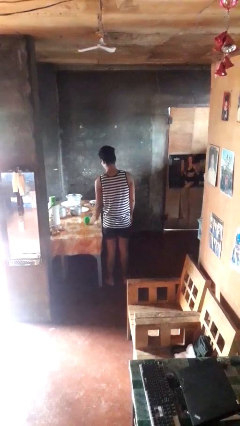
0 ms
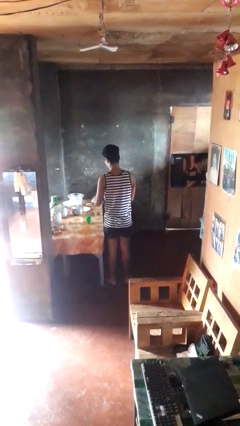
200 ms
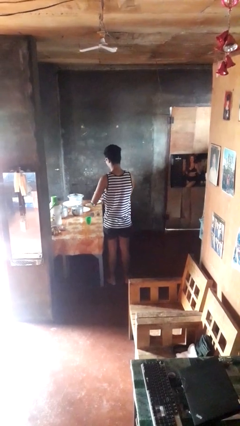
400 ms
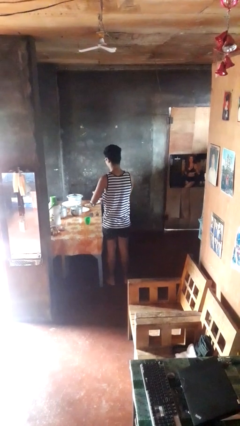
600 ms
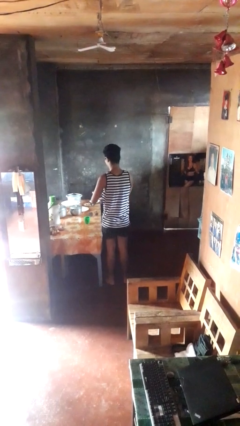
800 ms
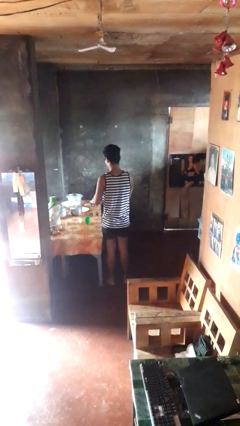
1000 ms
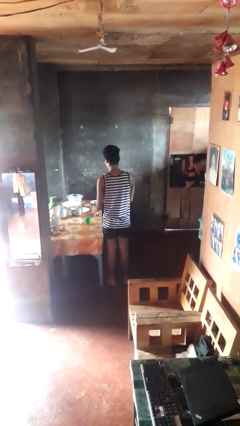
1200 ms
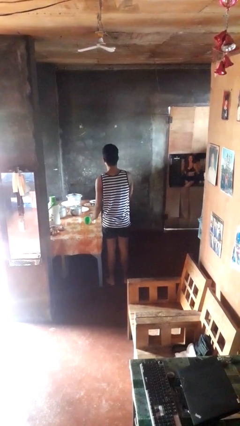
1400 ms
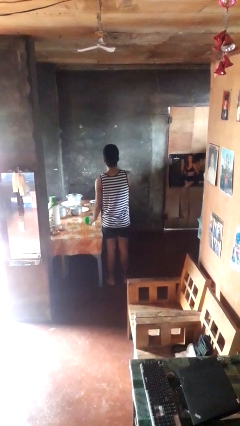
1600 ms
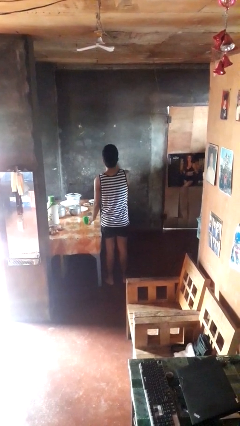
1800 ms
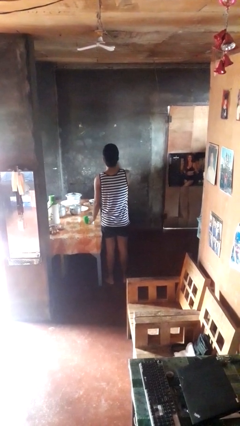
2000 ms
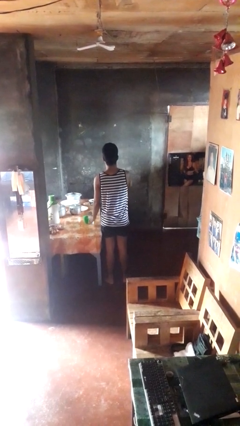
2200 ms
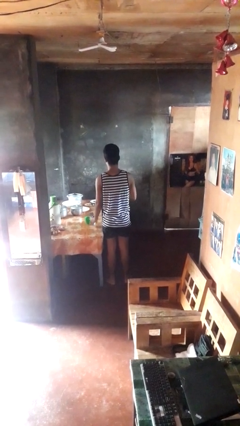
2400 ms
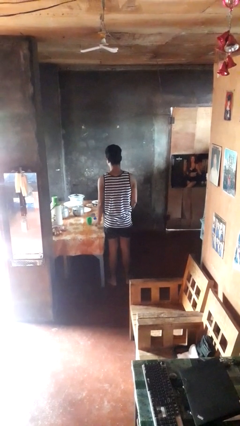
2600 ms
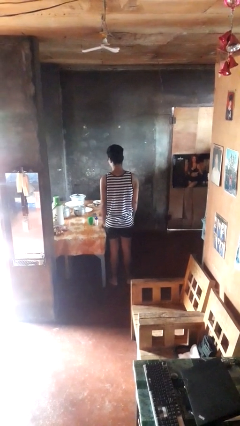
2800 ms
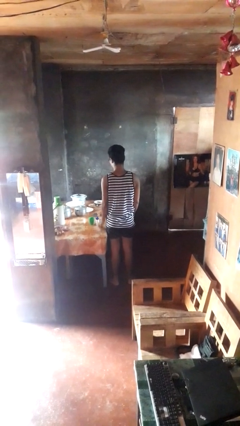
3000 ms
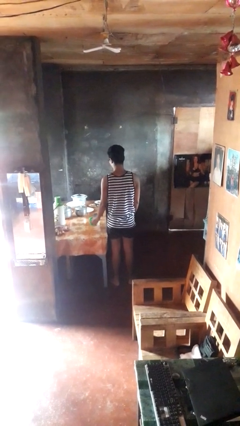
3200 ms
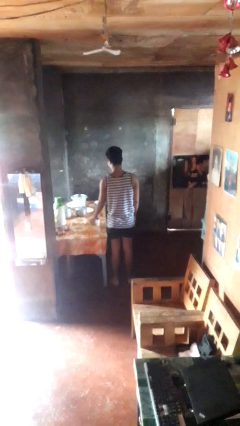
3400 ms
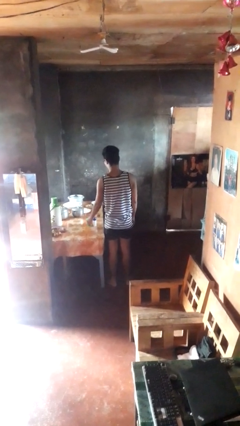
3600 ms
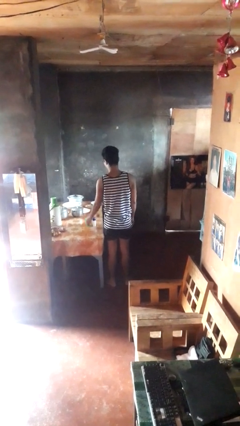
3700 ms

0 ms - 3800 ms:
person takes medicine pills

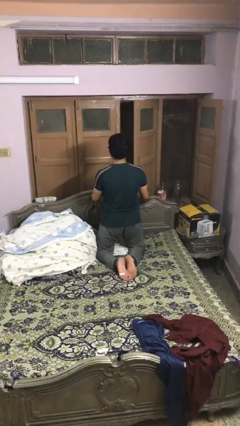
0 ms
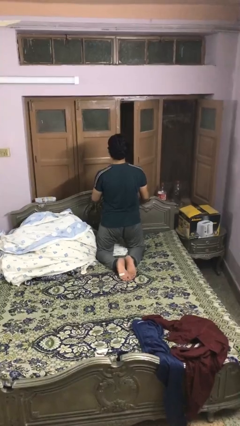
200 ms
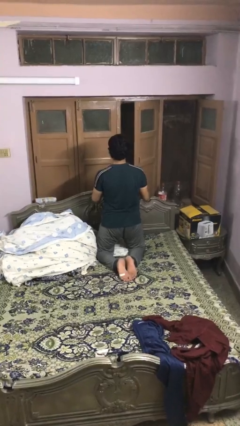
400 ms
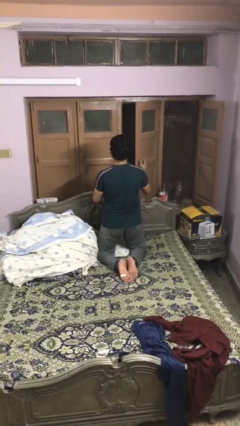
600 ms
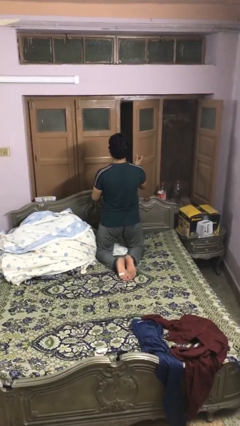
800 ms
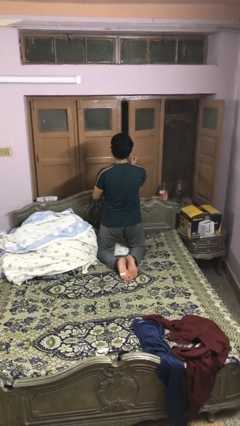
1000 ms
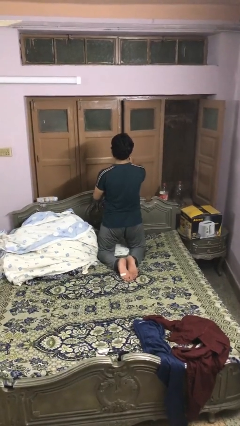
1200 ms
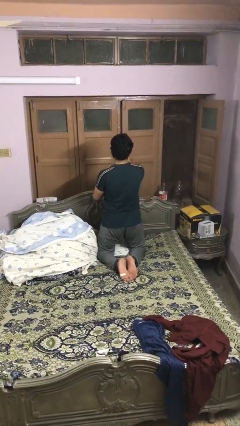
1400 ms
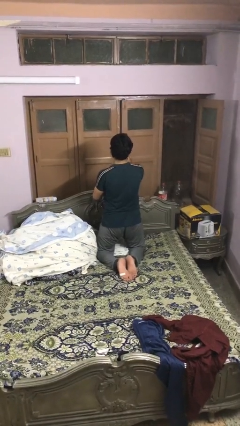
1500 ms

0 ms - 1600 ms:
person closes home window

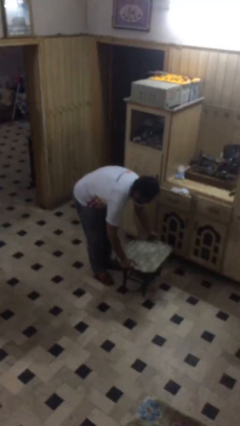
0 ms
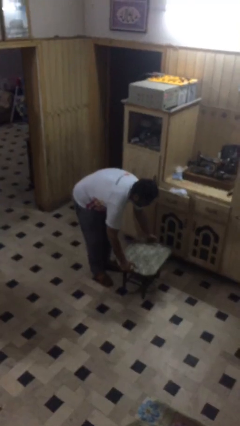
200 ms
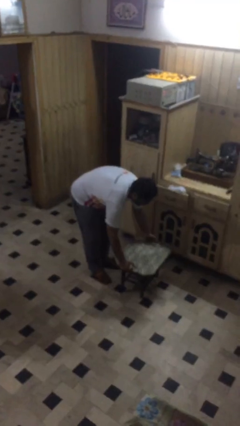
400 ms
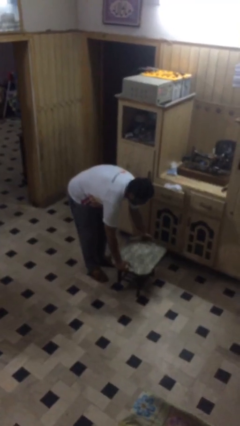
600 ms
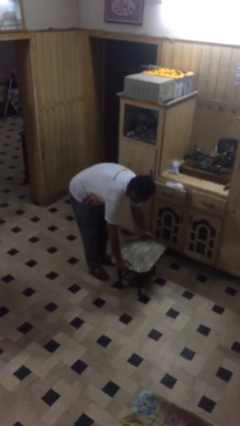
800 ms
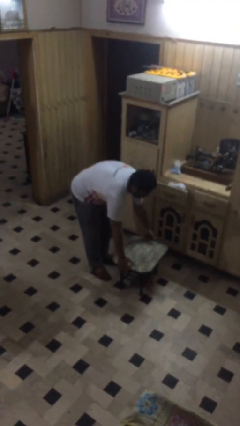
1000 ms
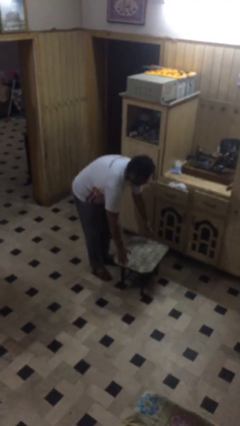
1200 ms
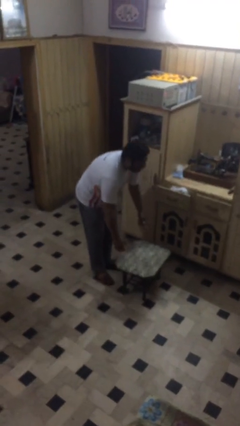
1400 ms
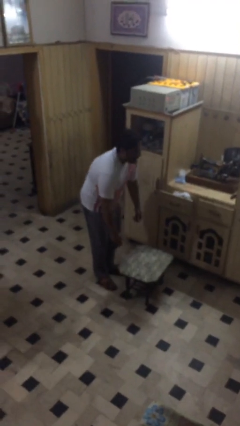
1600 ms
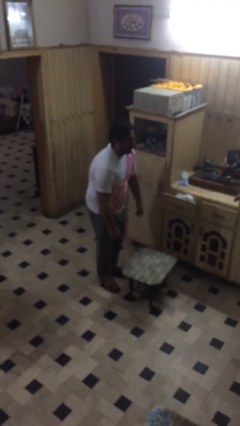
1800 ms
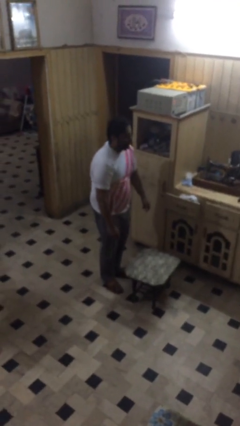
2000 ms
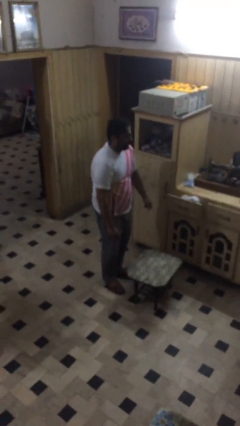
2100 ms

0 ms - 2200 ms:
person puts down object on floor

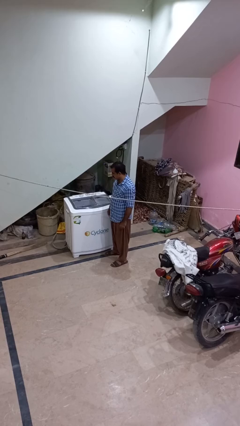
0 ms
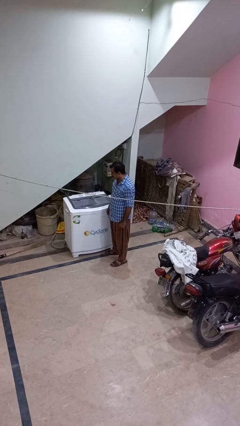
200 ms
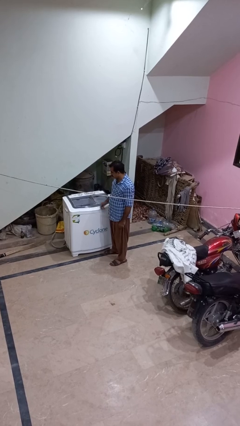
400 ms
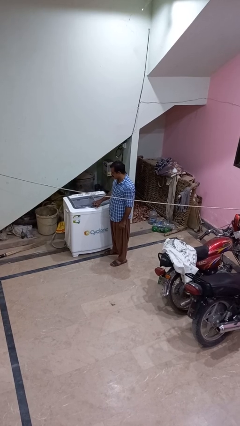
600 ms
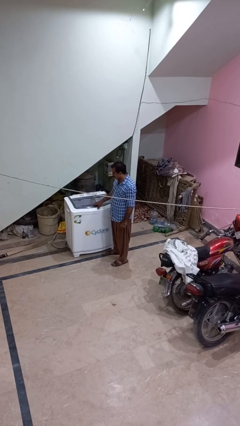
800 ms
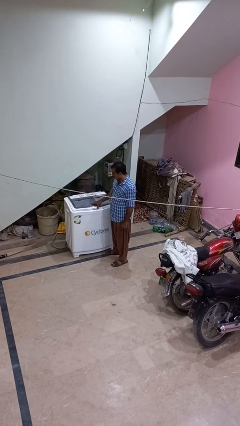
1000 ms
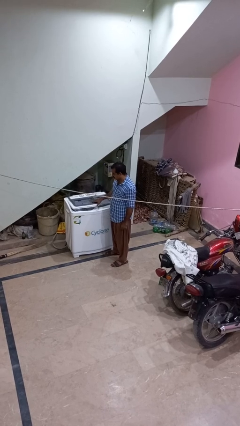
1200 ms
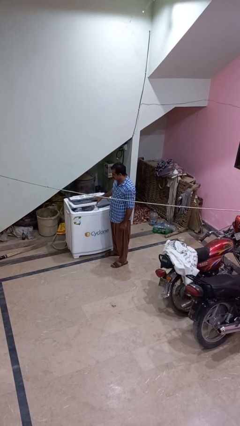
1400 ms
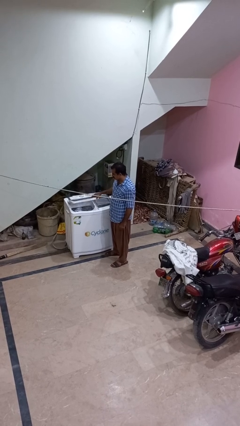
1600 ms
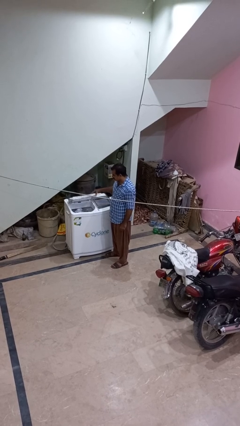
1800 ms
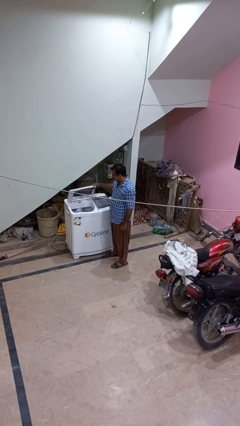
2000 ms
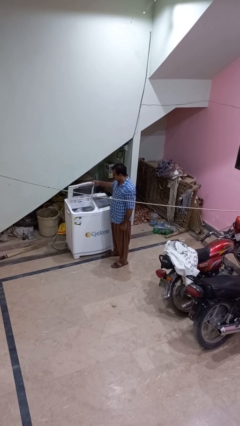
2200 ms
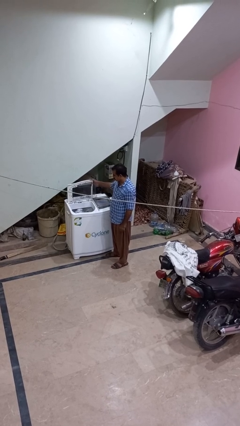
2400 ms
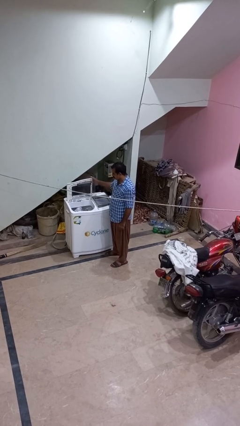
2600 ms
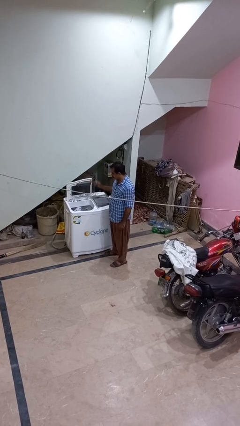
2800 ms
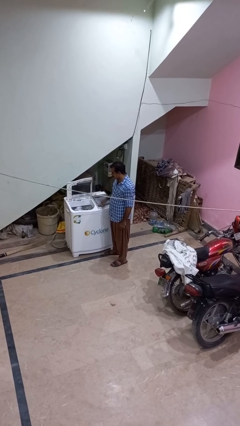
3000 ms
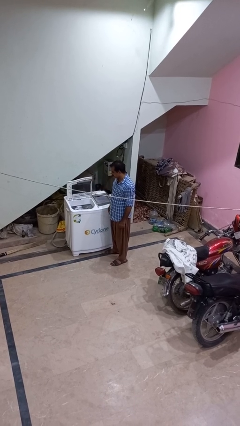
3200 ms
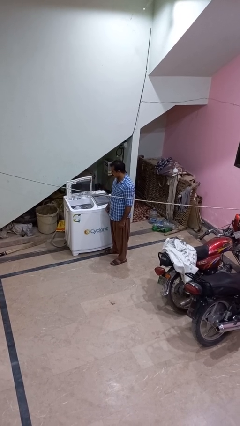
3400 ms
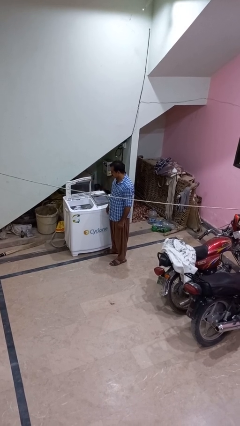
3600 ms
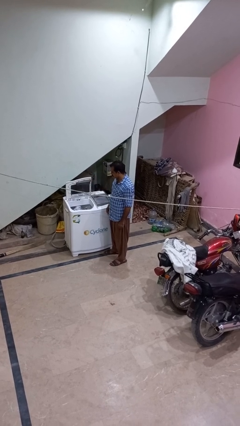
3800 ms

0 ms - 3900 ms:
person opens clothes washer

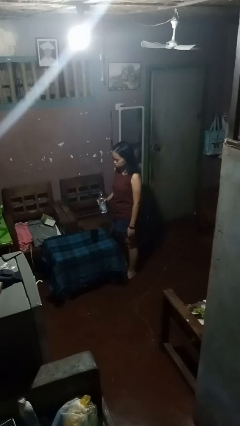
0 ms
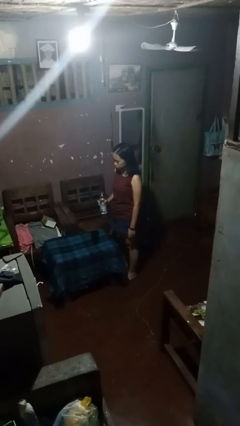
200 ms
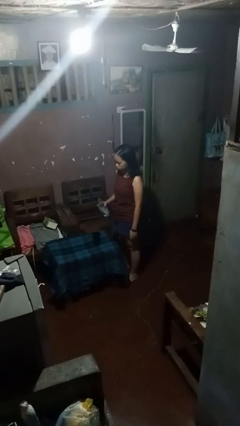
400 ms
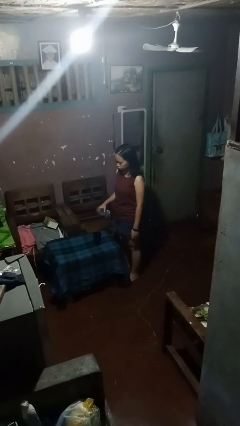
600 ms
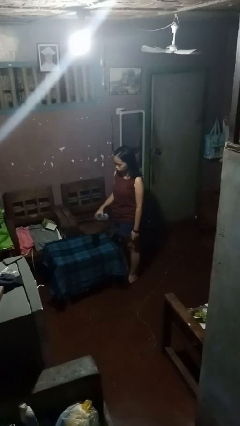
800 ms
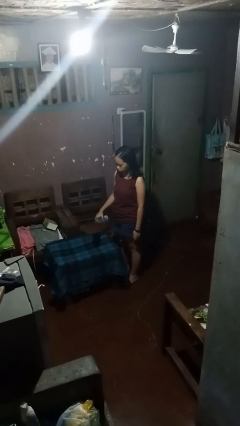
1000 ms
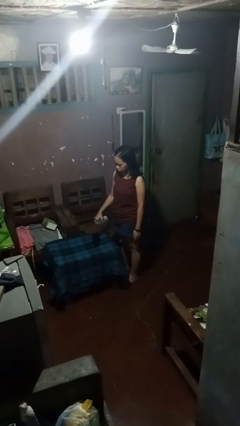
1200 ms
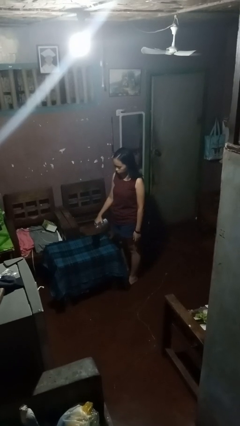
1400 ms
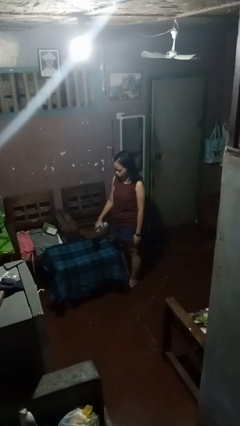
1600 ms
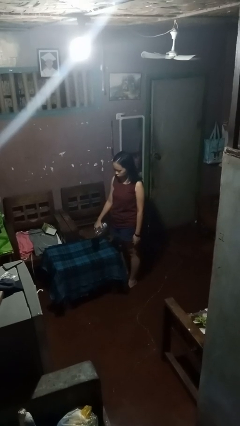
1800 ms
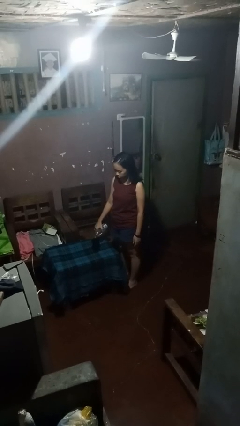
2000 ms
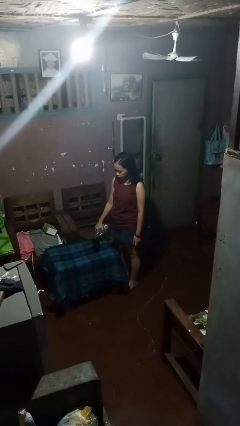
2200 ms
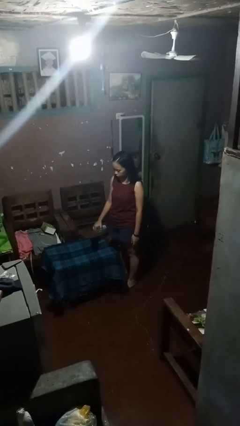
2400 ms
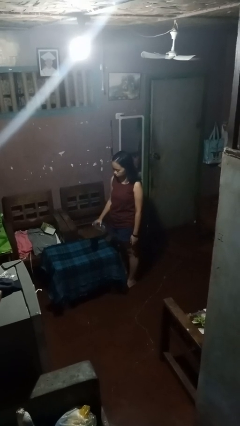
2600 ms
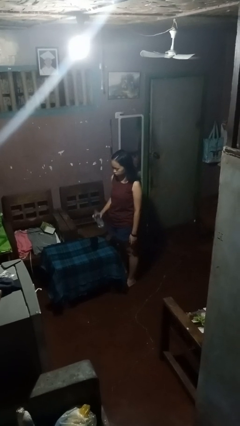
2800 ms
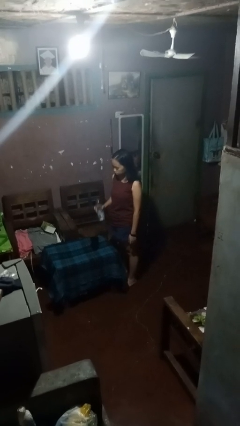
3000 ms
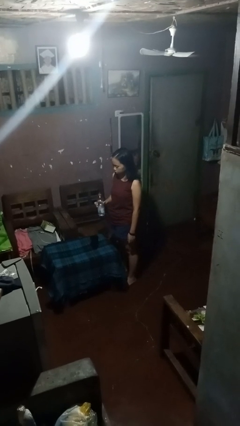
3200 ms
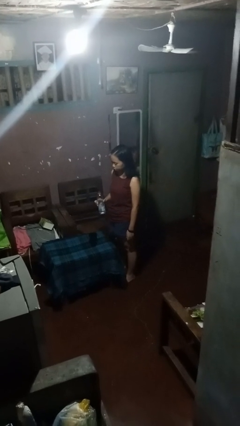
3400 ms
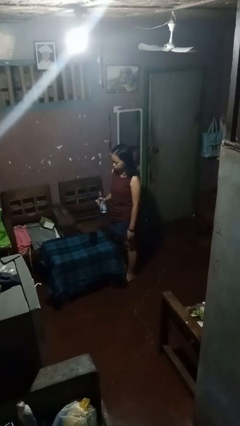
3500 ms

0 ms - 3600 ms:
person pours liquid into cup

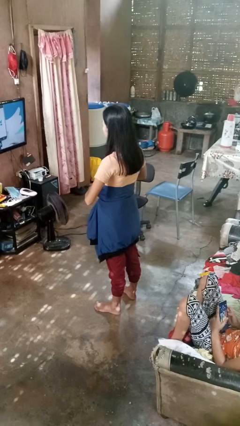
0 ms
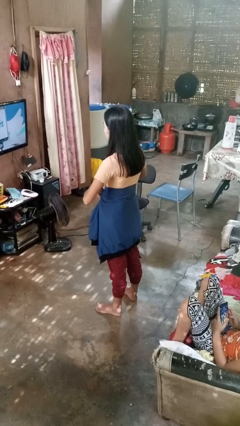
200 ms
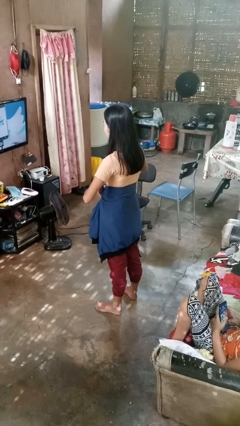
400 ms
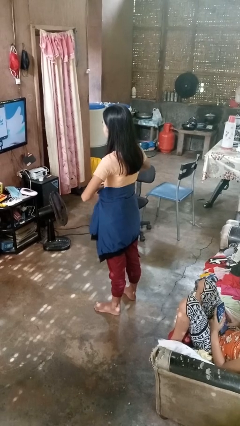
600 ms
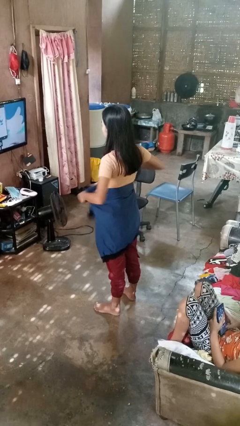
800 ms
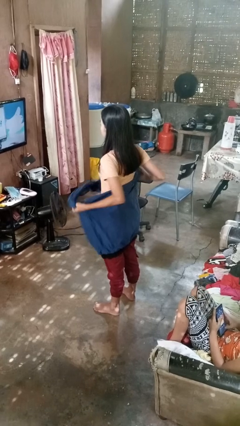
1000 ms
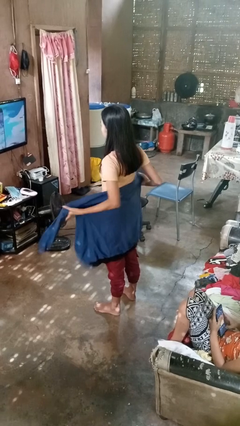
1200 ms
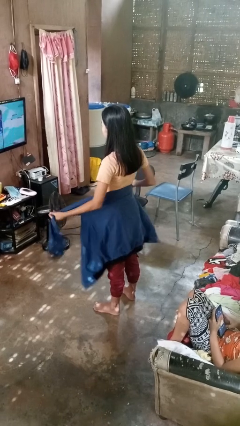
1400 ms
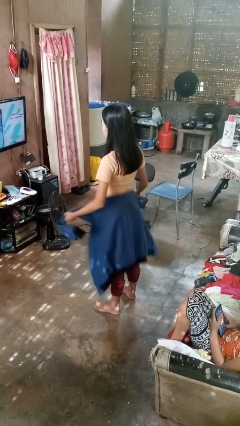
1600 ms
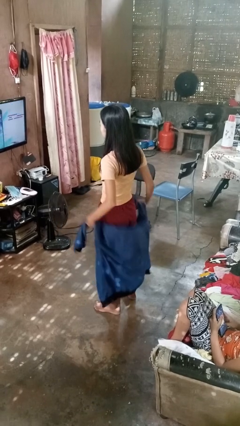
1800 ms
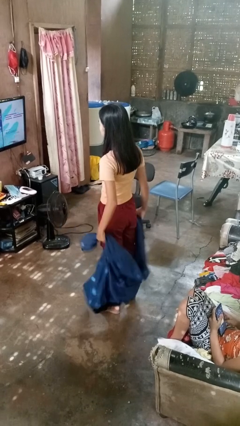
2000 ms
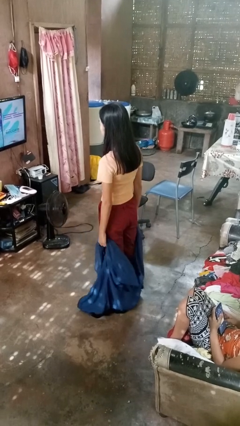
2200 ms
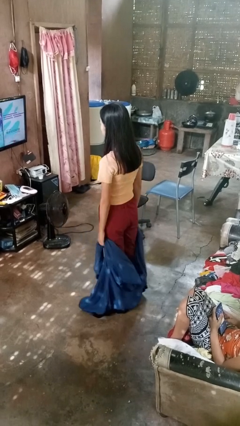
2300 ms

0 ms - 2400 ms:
person unties jacket around waist
